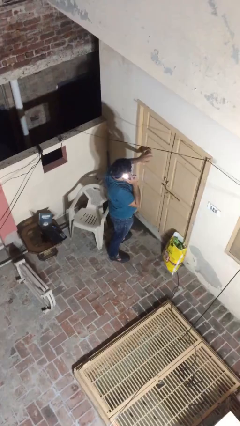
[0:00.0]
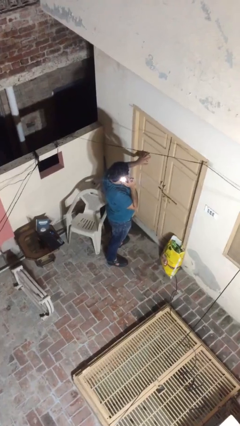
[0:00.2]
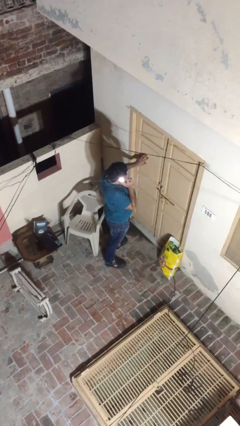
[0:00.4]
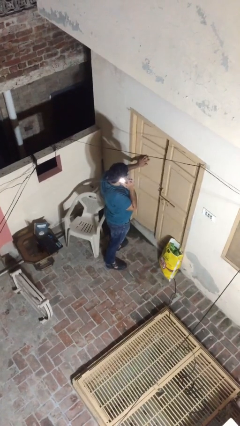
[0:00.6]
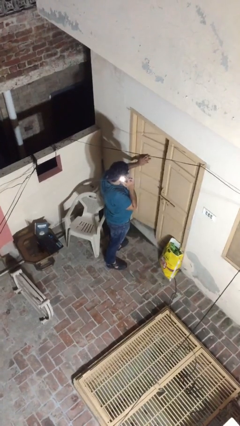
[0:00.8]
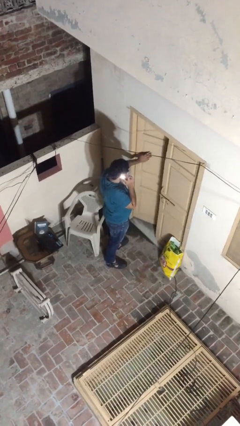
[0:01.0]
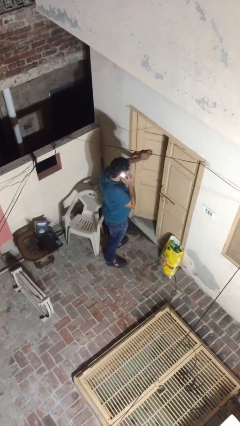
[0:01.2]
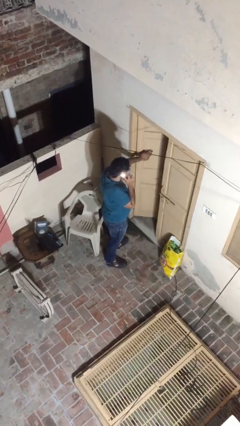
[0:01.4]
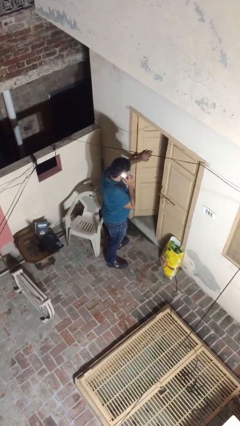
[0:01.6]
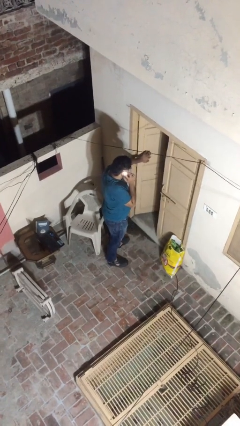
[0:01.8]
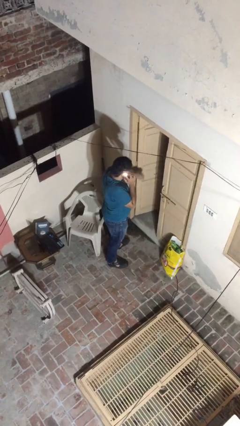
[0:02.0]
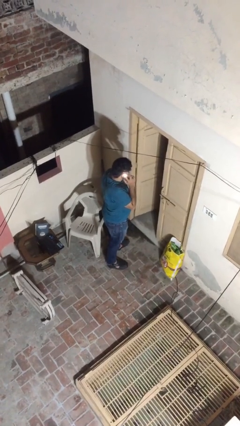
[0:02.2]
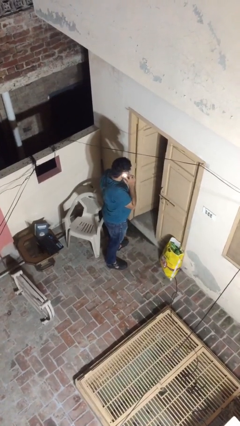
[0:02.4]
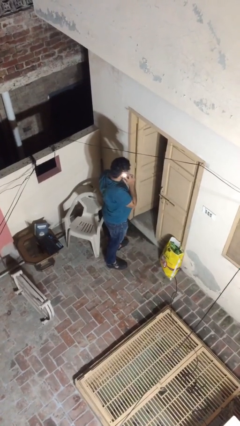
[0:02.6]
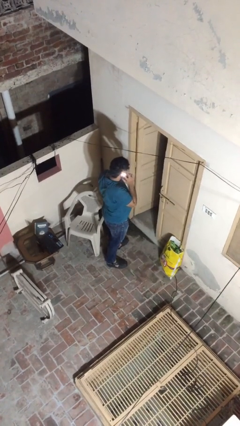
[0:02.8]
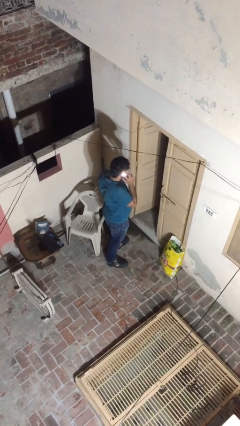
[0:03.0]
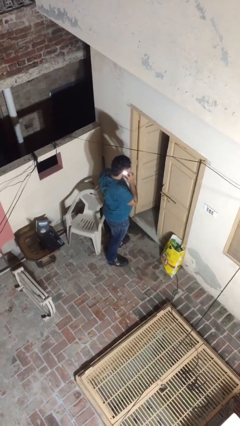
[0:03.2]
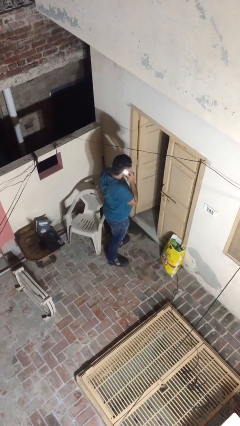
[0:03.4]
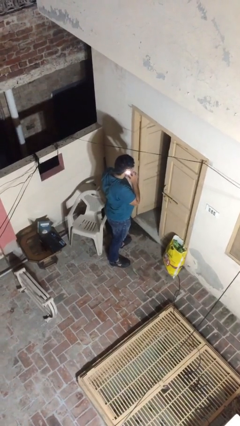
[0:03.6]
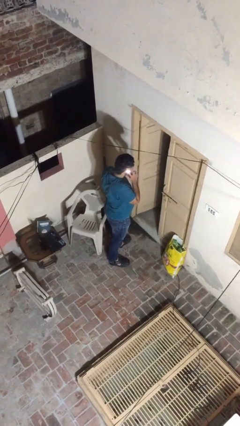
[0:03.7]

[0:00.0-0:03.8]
person opens facility door

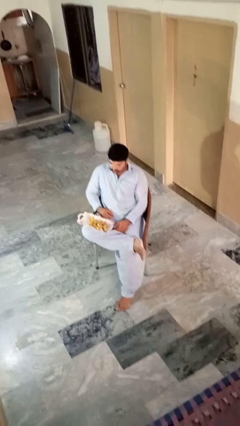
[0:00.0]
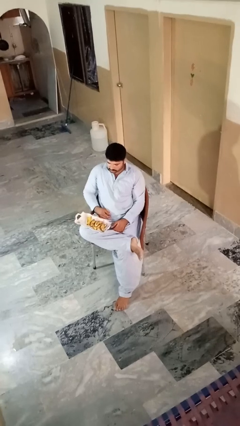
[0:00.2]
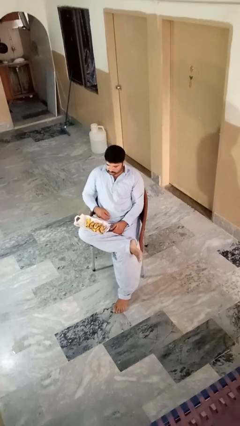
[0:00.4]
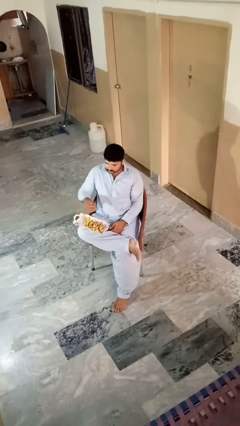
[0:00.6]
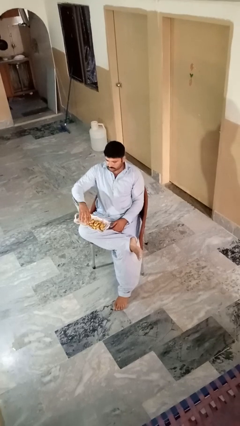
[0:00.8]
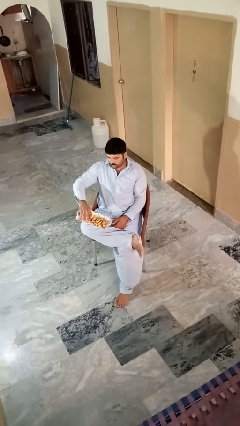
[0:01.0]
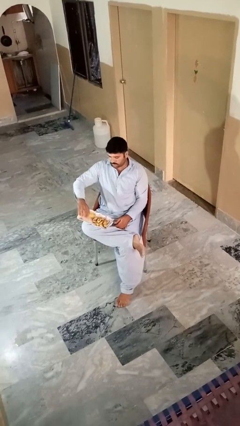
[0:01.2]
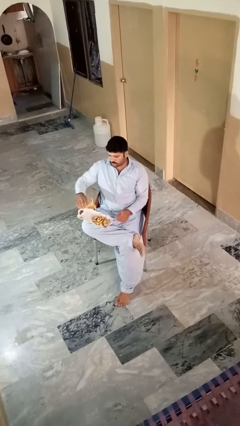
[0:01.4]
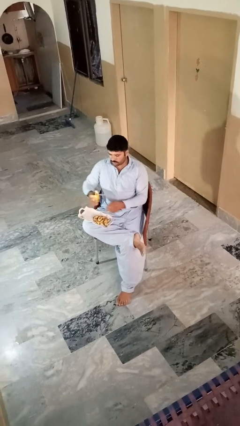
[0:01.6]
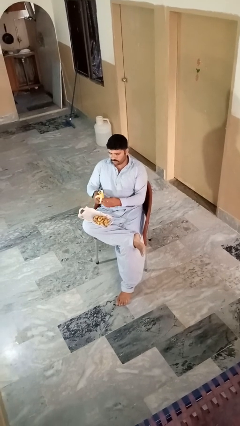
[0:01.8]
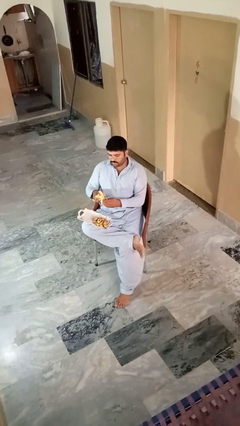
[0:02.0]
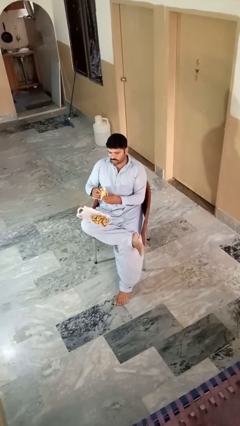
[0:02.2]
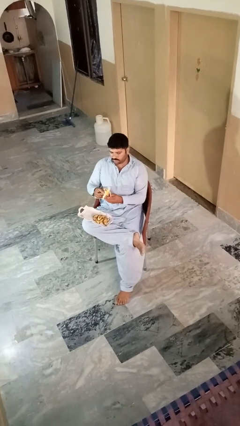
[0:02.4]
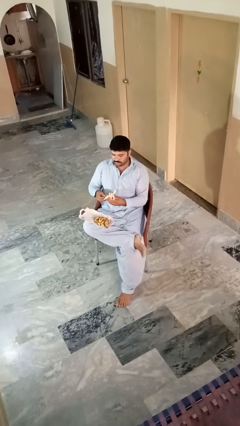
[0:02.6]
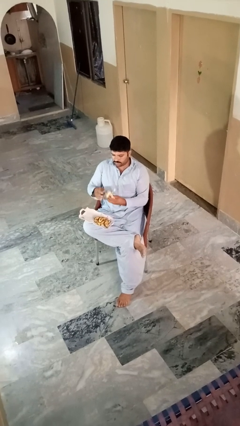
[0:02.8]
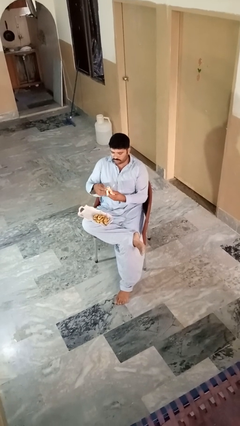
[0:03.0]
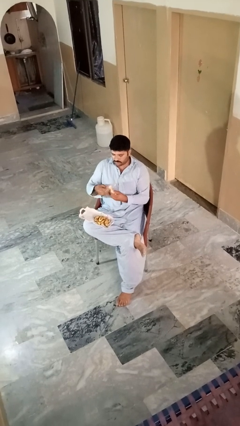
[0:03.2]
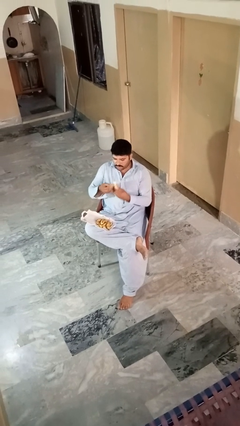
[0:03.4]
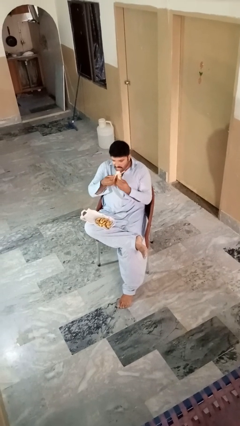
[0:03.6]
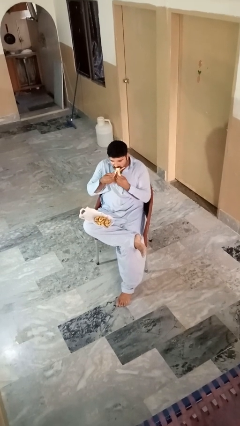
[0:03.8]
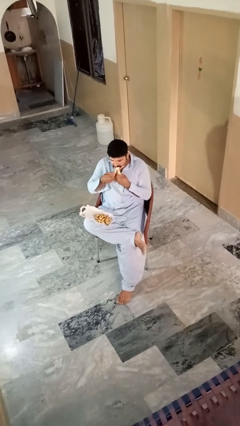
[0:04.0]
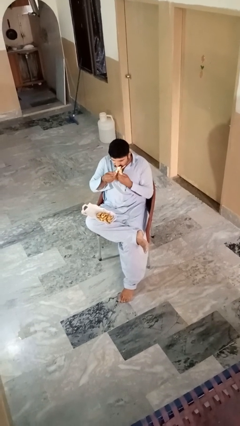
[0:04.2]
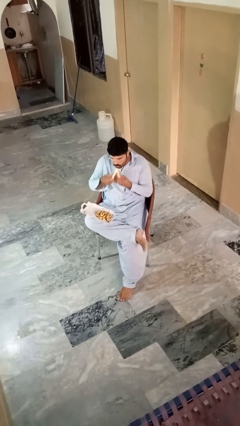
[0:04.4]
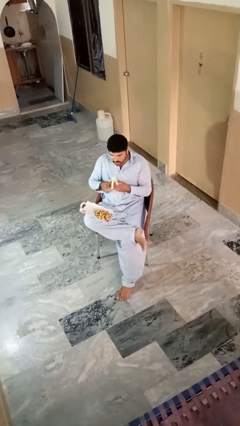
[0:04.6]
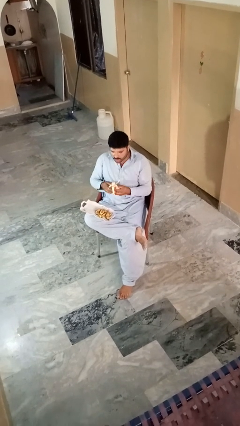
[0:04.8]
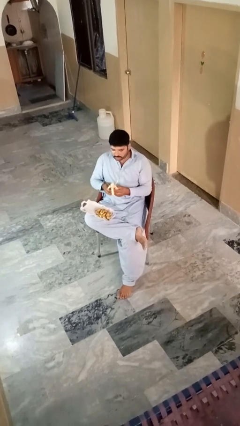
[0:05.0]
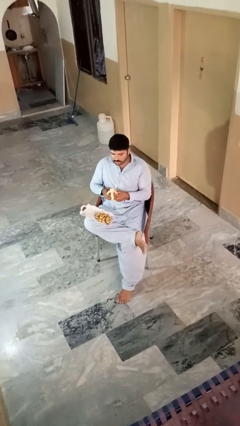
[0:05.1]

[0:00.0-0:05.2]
person eats banana

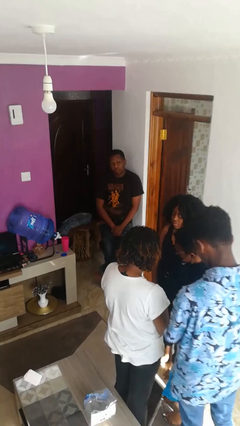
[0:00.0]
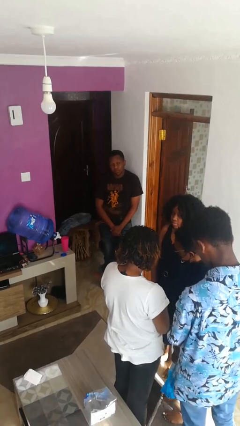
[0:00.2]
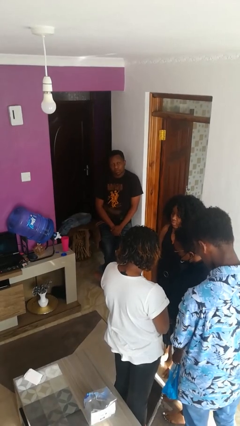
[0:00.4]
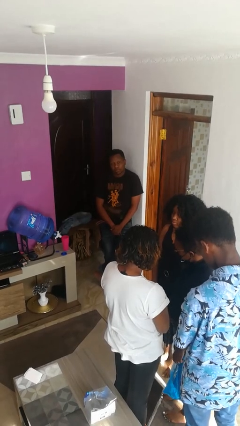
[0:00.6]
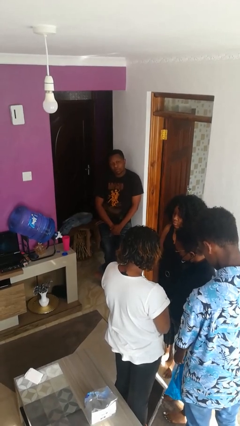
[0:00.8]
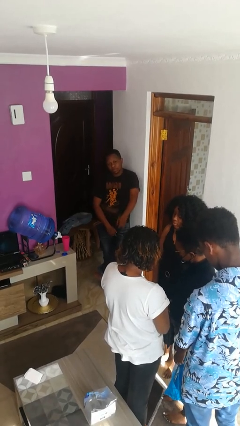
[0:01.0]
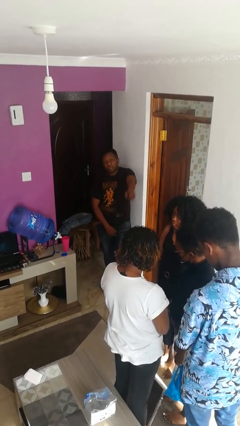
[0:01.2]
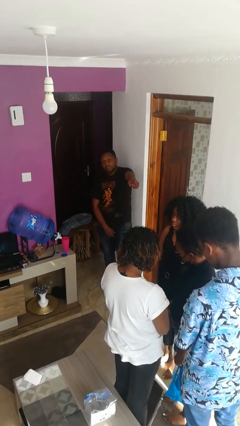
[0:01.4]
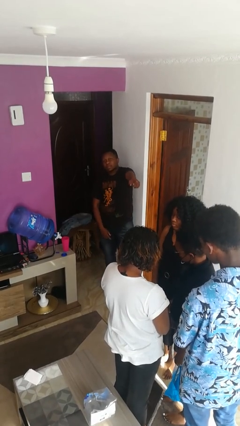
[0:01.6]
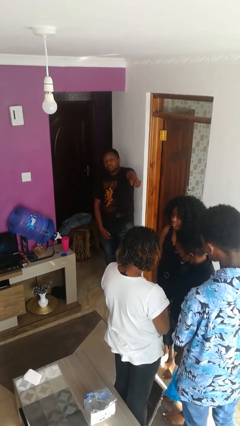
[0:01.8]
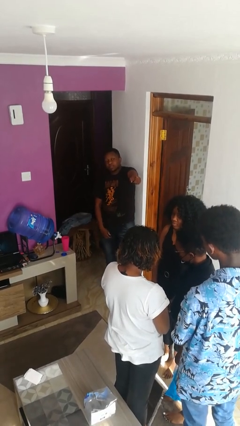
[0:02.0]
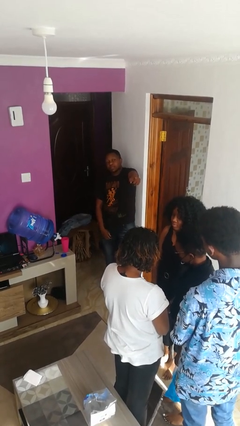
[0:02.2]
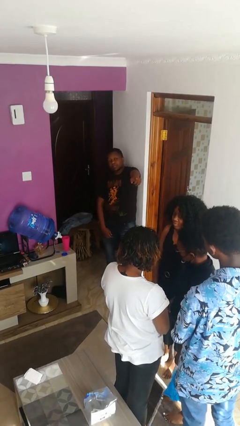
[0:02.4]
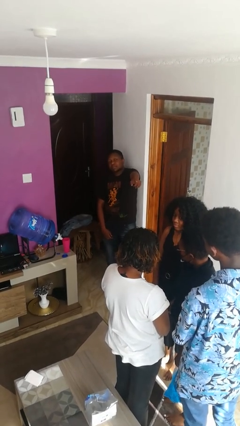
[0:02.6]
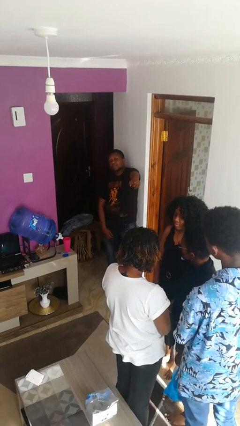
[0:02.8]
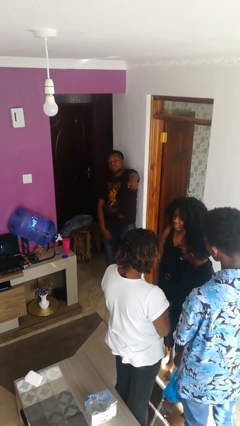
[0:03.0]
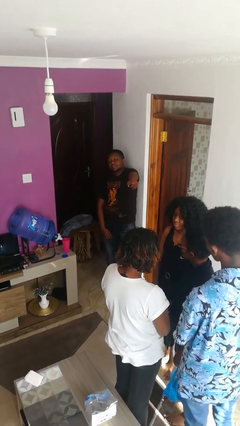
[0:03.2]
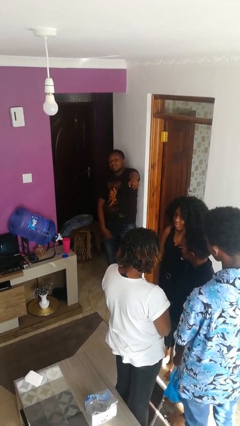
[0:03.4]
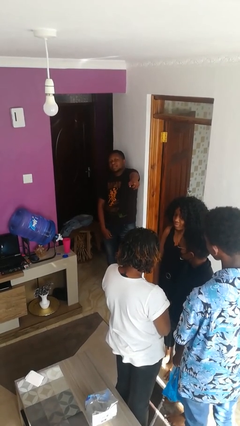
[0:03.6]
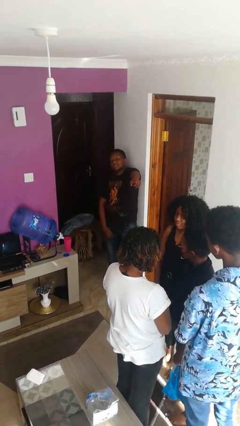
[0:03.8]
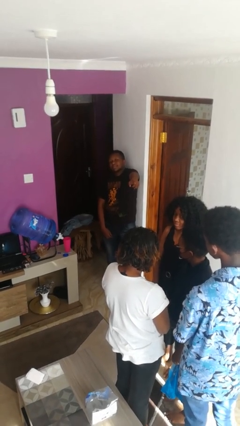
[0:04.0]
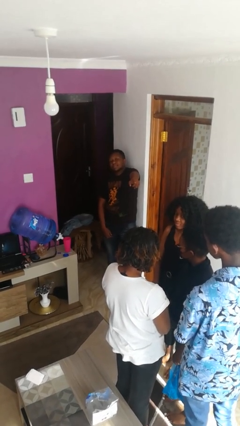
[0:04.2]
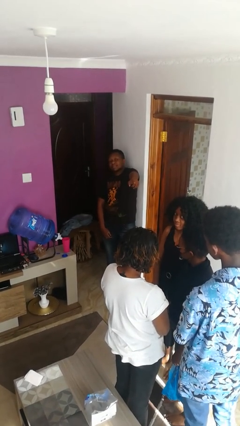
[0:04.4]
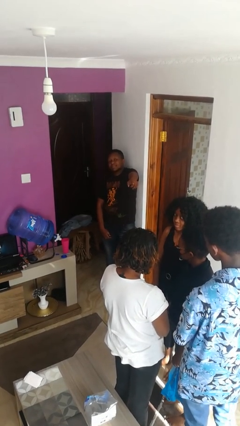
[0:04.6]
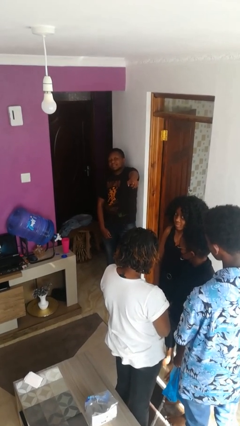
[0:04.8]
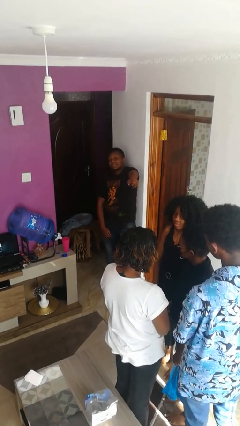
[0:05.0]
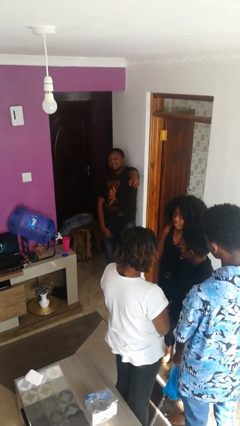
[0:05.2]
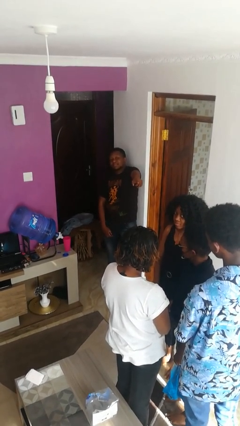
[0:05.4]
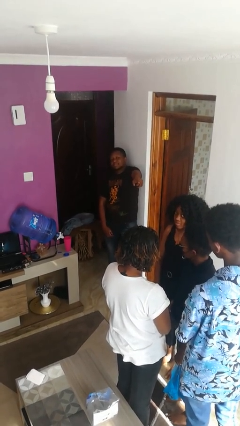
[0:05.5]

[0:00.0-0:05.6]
person points at person

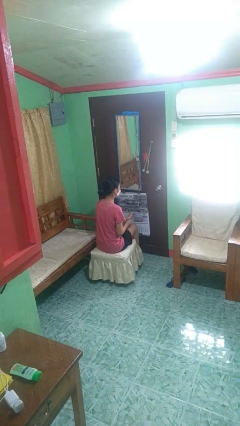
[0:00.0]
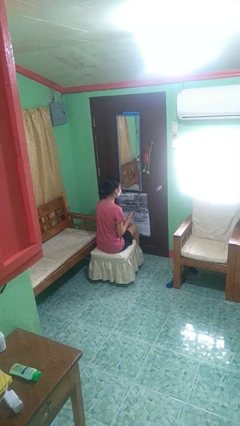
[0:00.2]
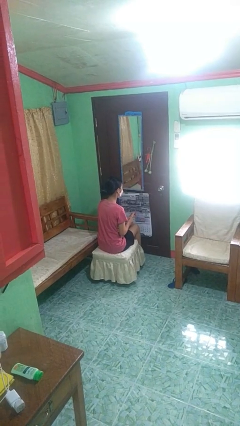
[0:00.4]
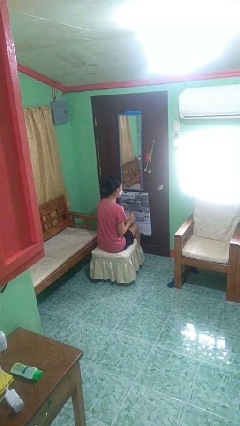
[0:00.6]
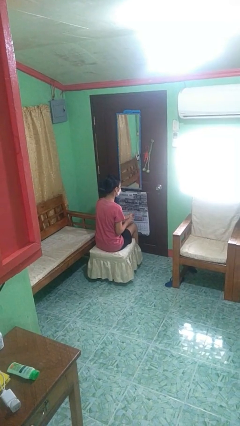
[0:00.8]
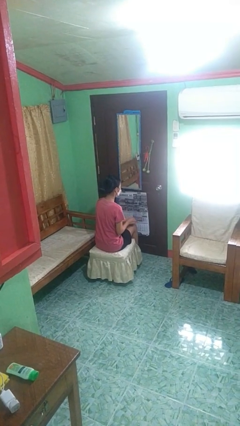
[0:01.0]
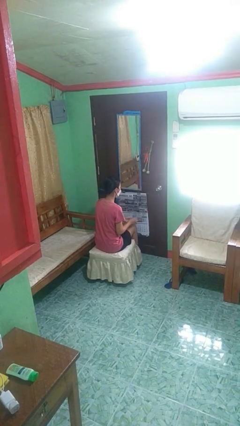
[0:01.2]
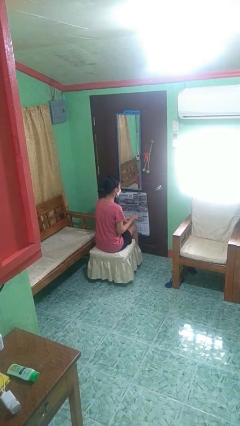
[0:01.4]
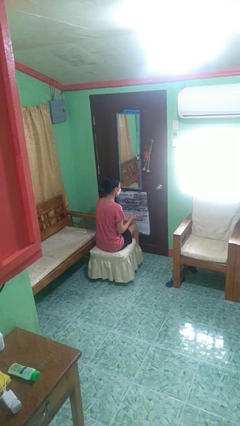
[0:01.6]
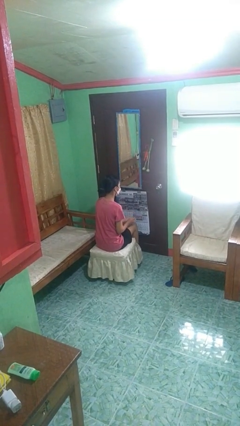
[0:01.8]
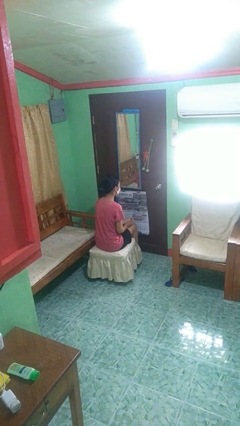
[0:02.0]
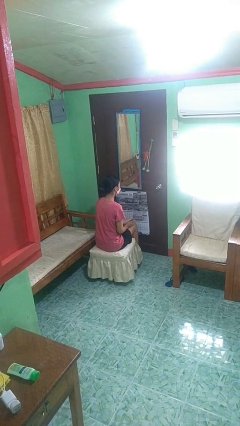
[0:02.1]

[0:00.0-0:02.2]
person takes off wristwatch

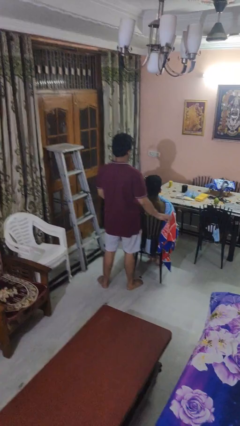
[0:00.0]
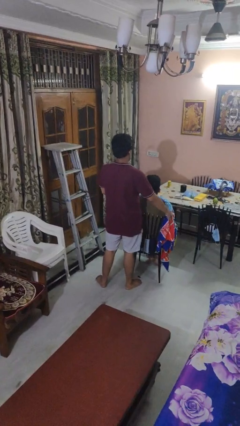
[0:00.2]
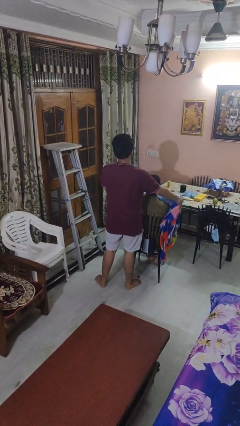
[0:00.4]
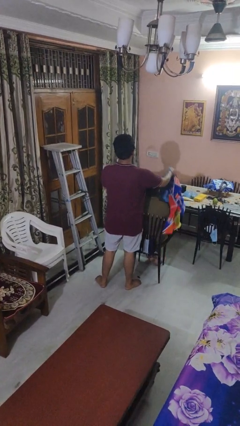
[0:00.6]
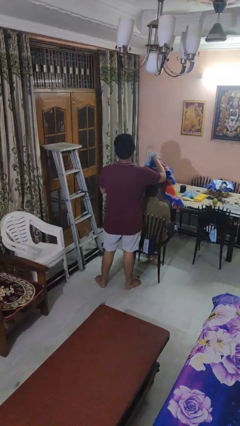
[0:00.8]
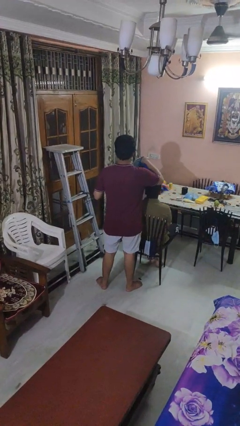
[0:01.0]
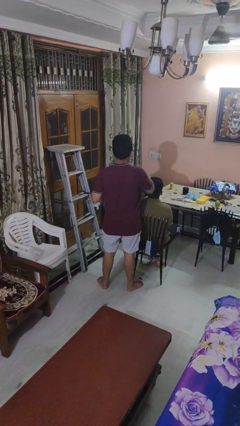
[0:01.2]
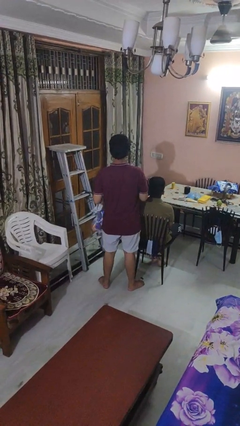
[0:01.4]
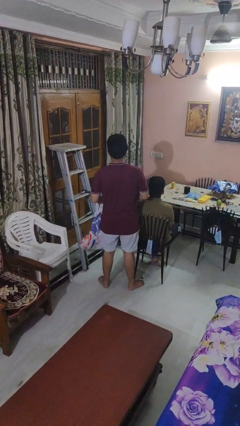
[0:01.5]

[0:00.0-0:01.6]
person uncovers friend with blanket
